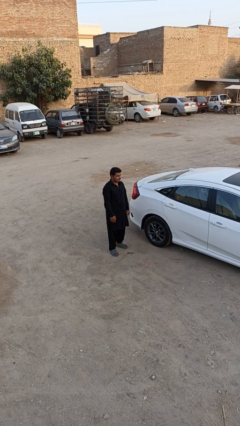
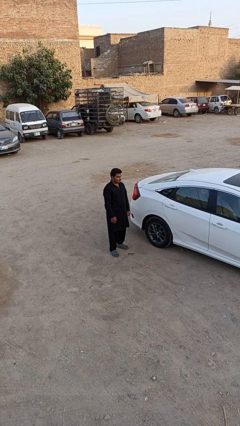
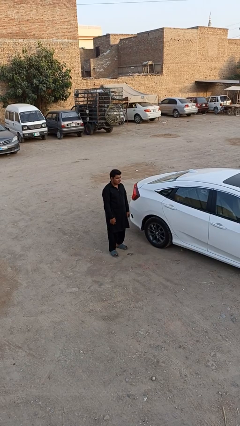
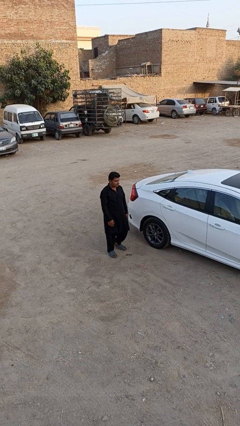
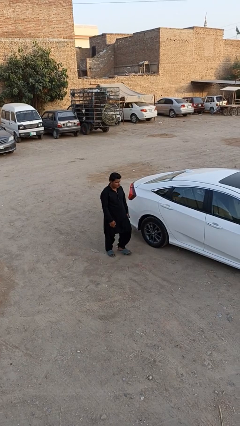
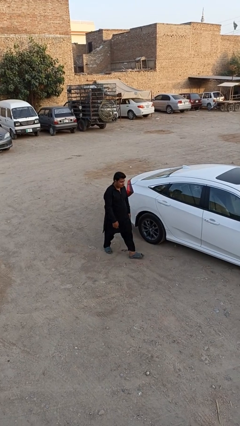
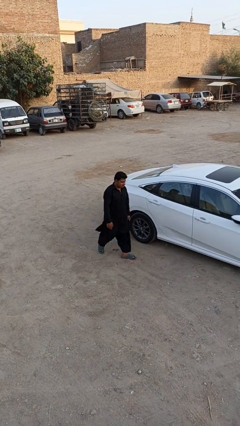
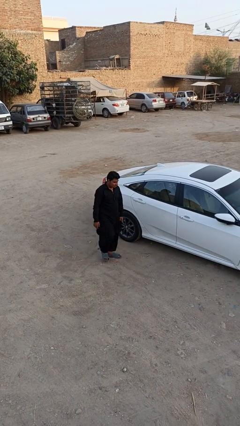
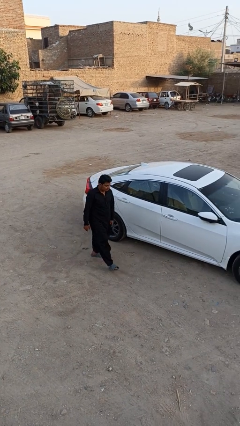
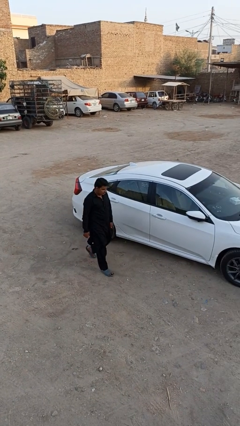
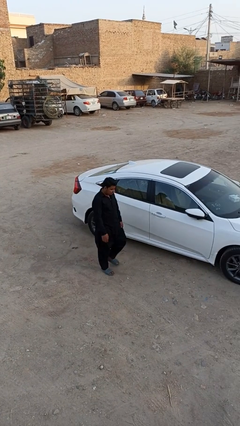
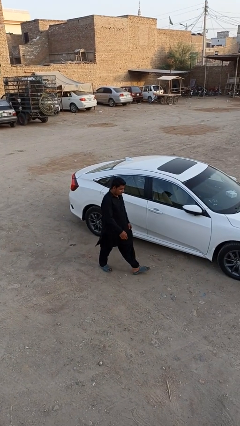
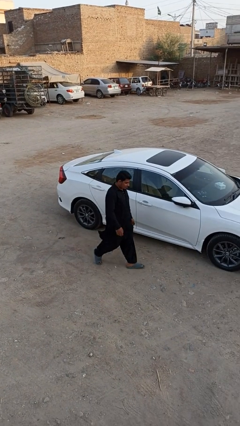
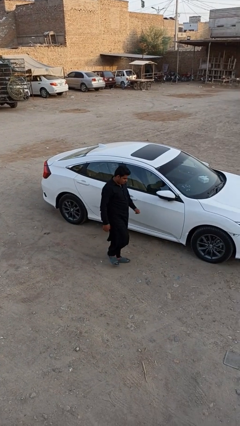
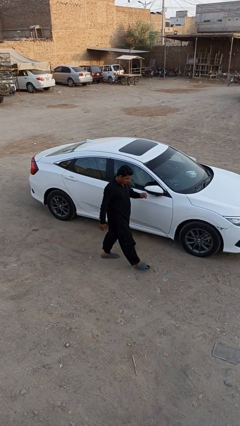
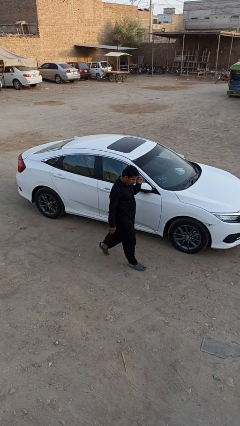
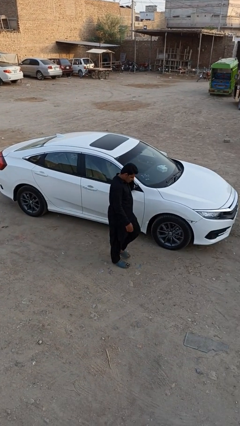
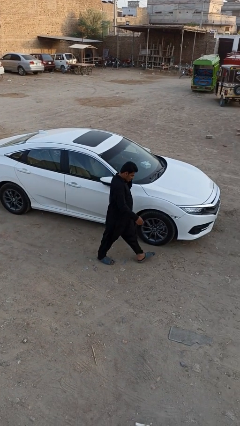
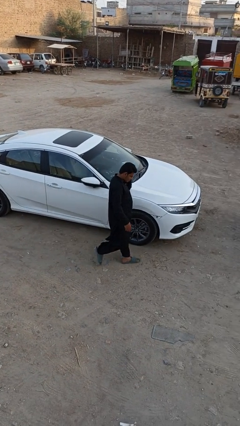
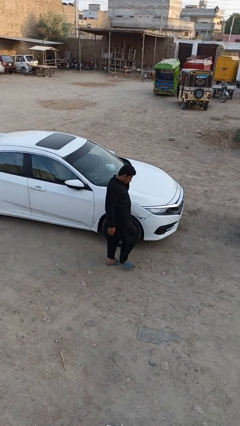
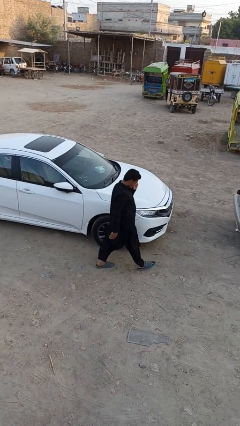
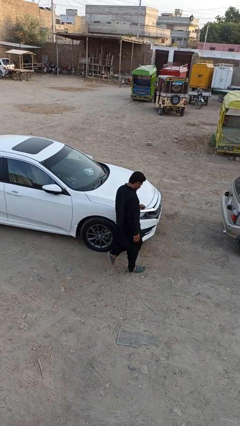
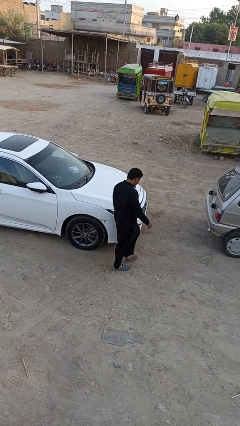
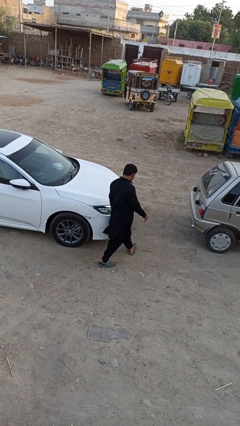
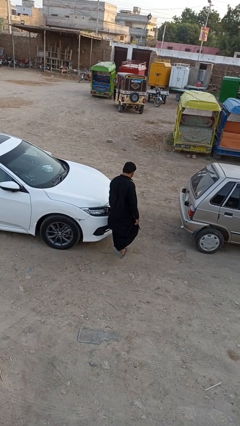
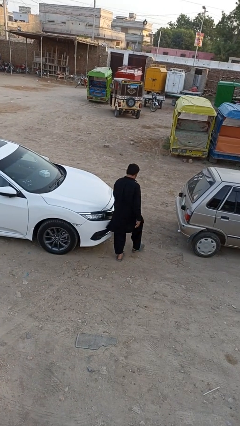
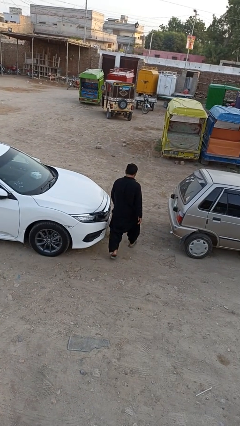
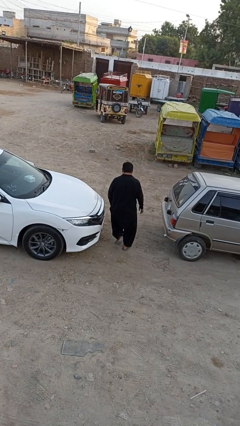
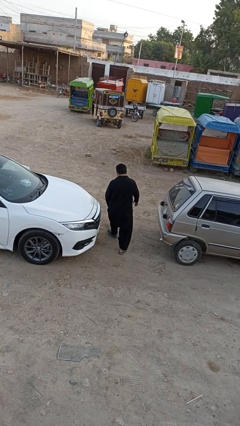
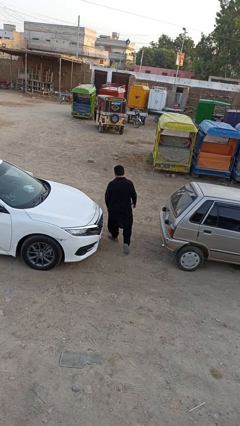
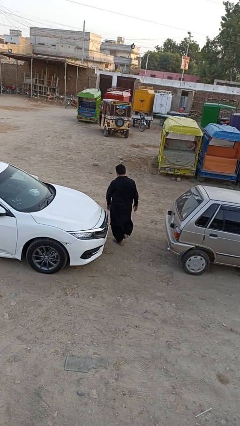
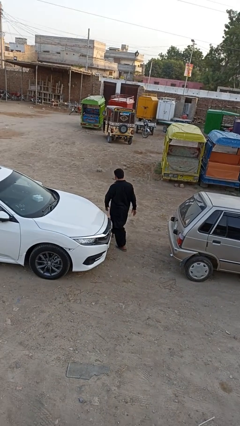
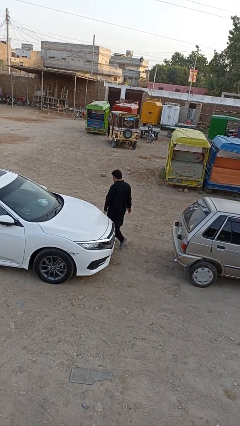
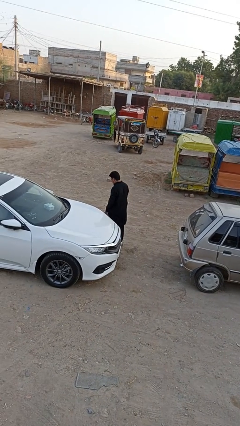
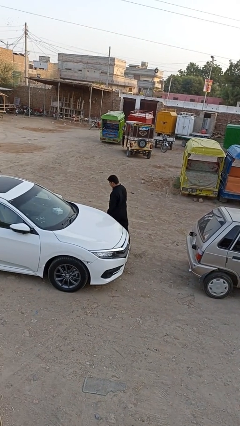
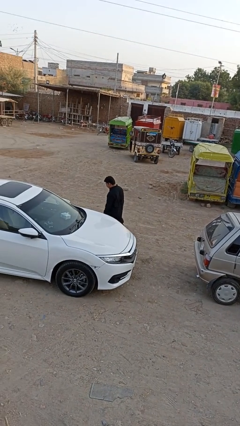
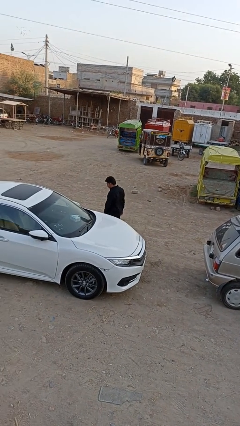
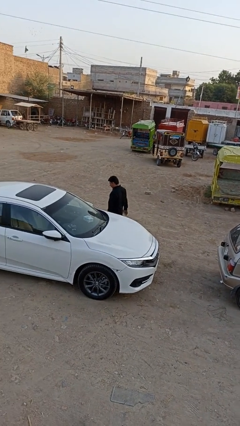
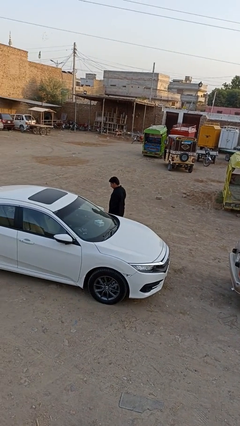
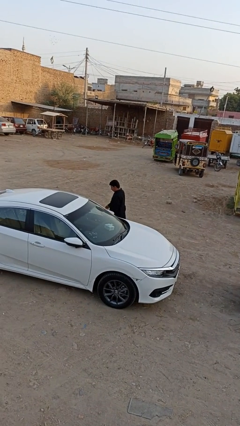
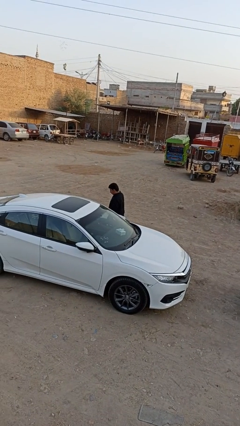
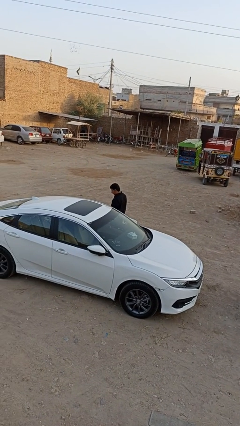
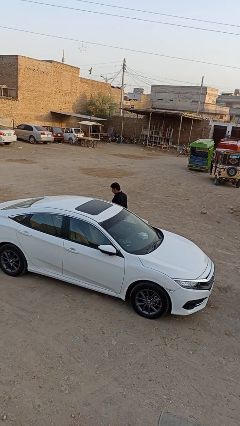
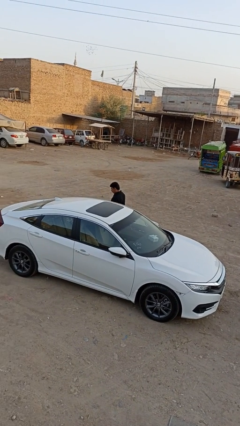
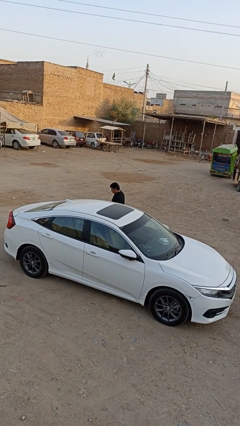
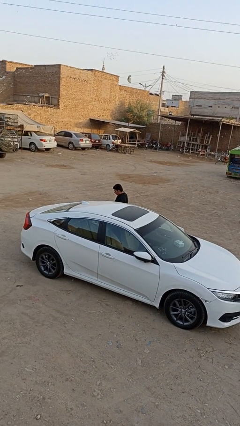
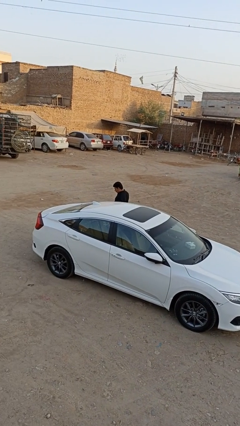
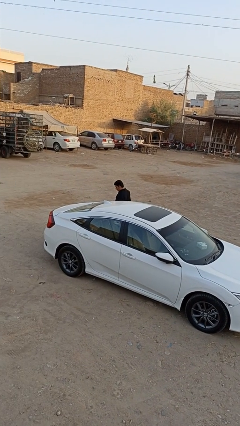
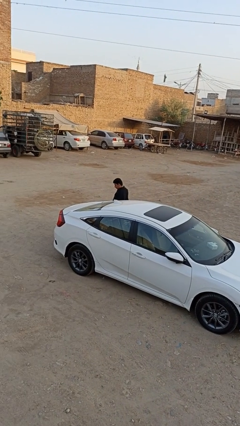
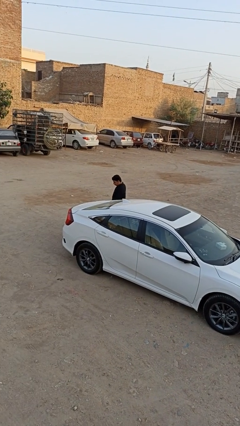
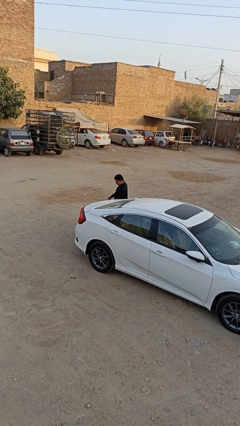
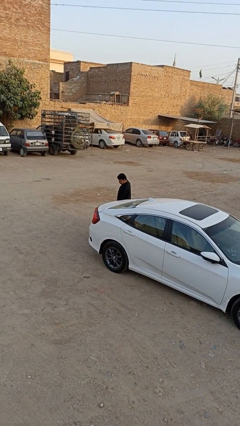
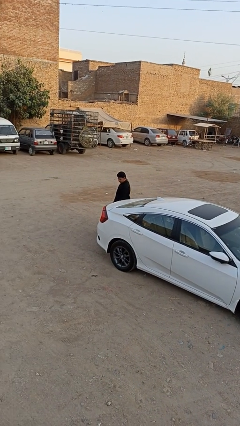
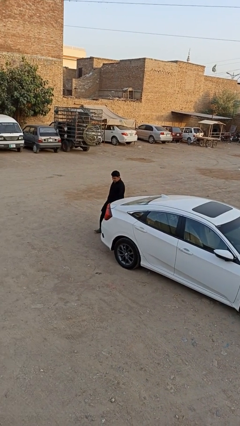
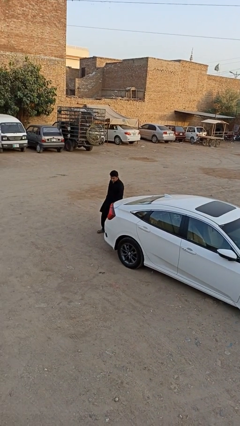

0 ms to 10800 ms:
person walks around car

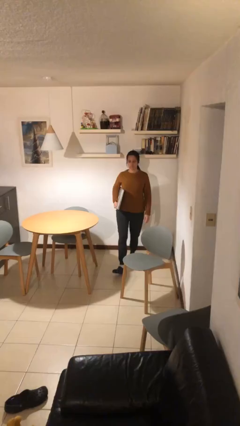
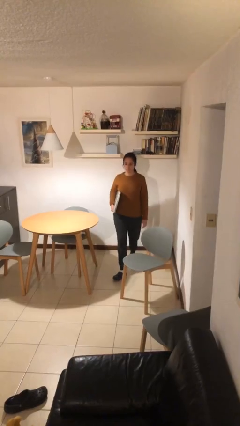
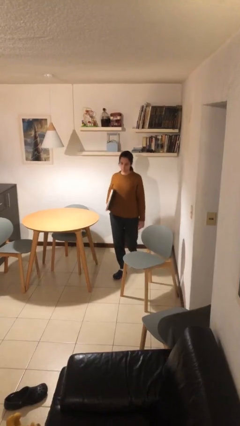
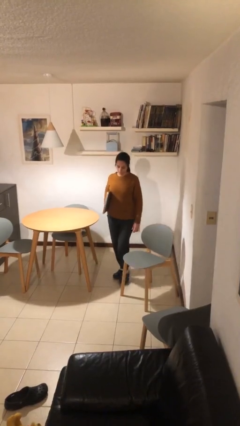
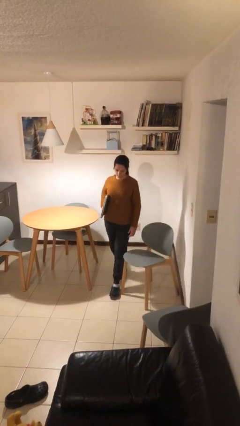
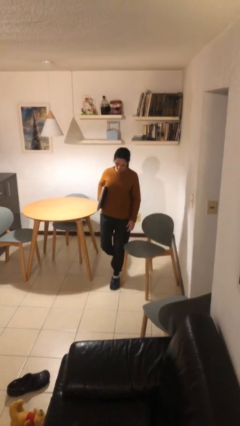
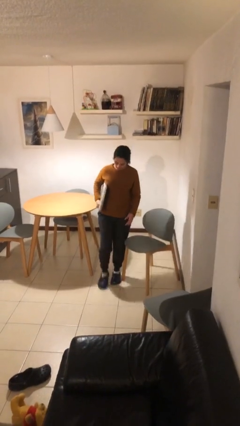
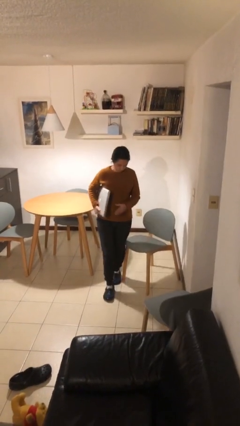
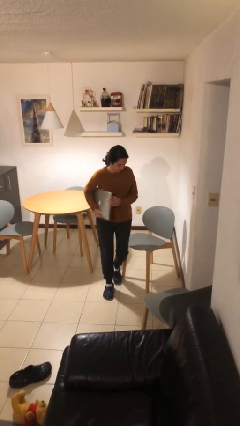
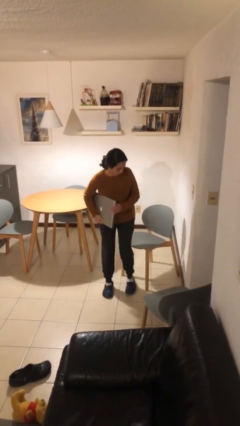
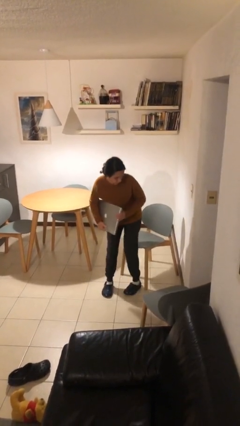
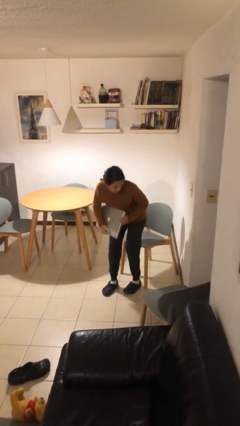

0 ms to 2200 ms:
person stands up

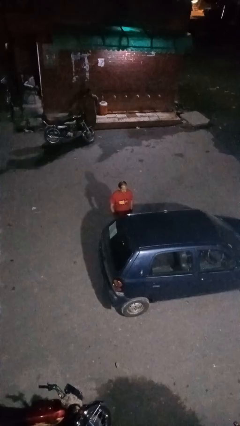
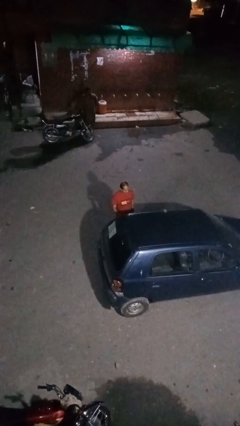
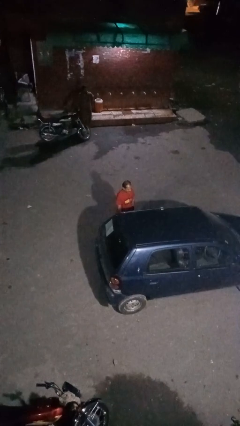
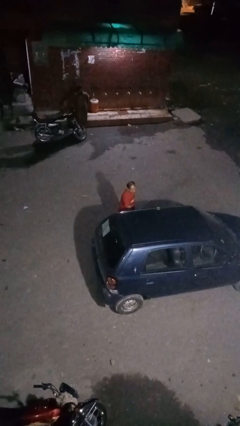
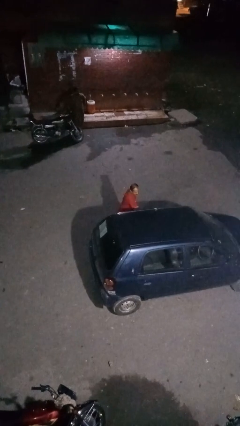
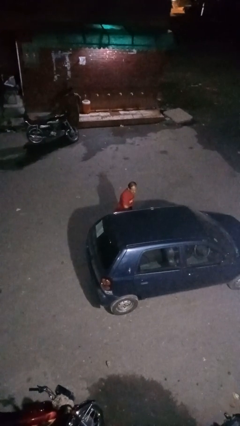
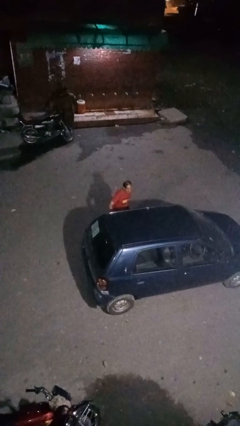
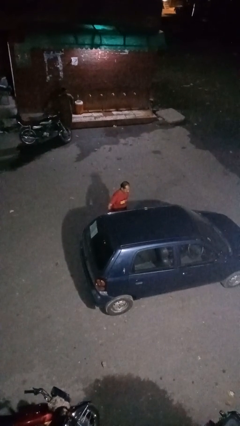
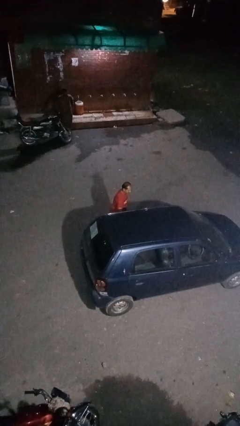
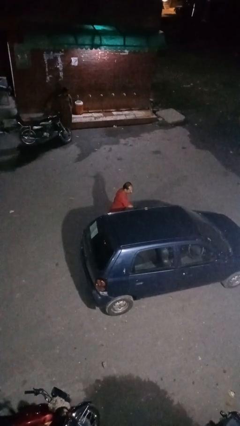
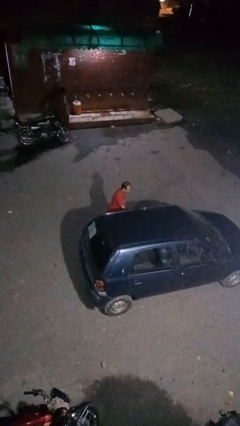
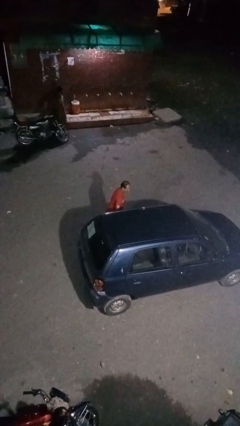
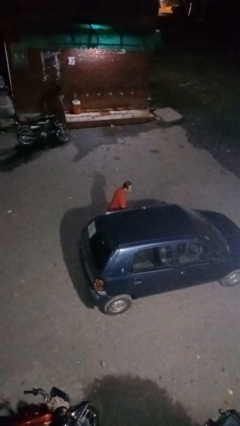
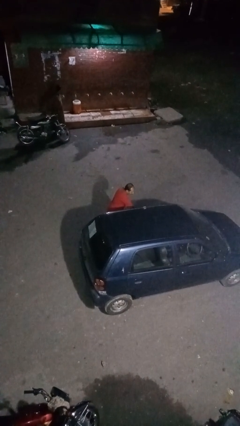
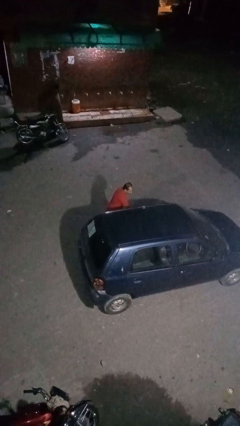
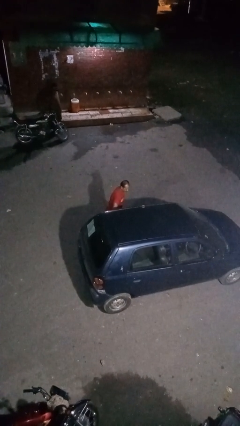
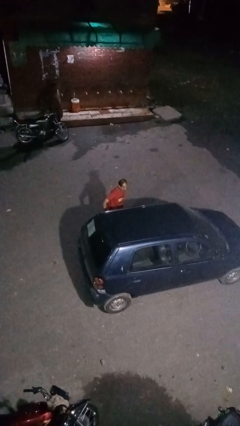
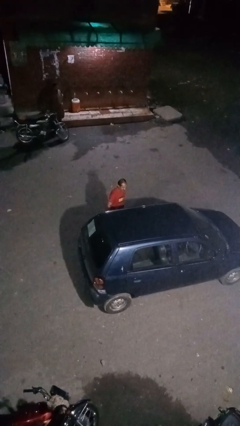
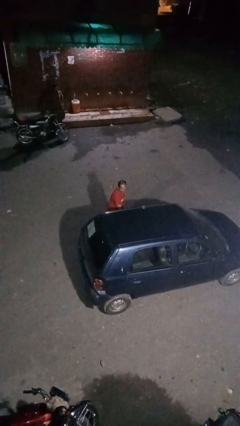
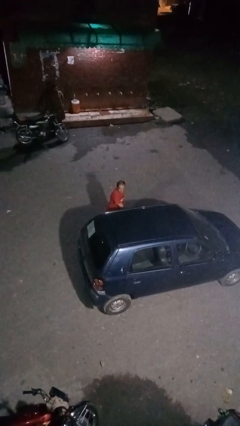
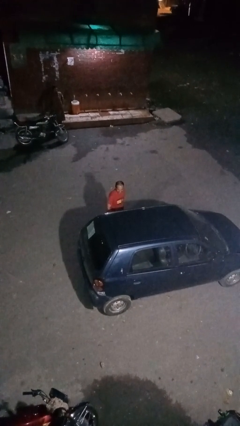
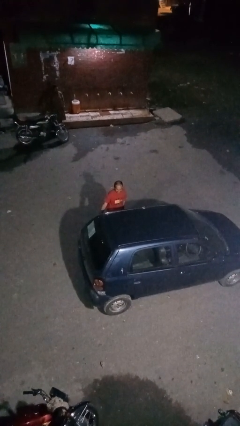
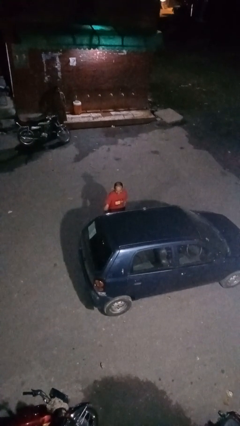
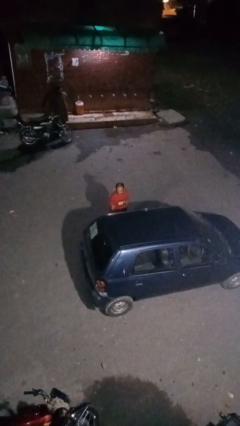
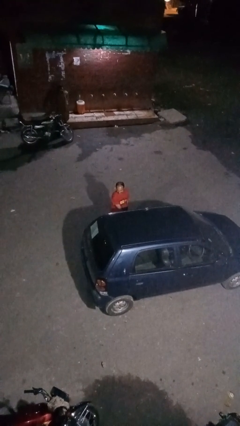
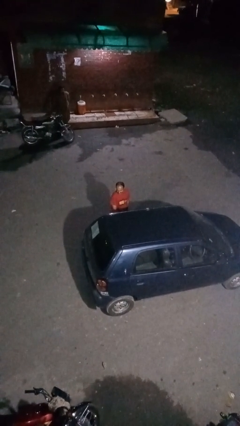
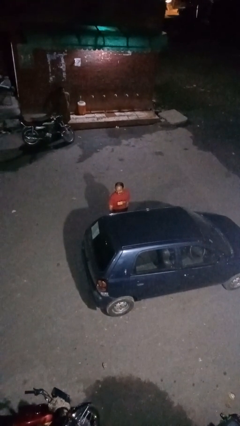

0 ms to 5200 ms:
person polishes car with rag
